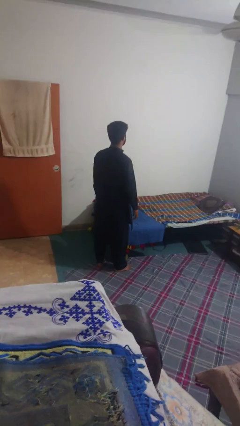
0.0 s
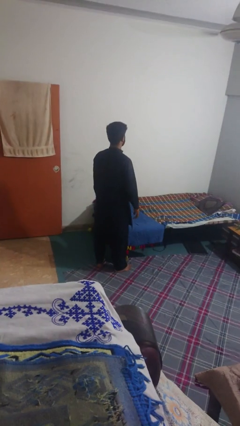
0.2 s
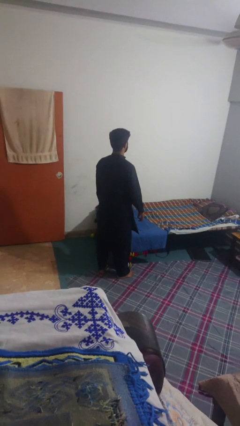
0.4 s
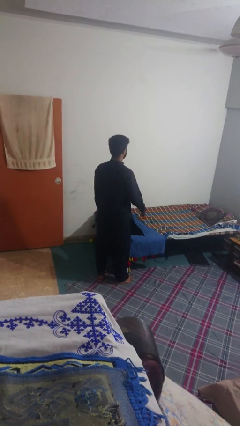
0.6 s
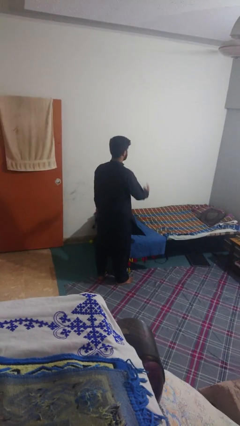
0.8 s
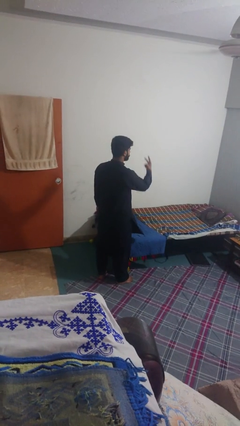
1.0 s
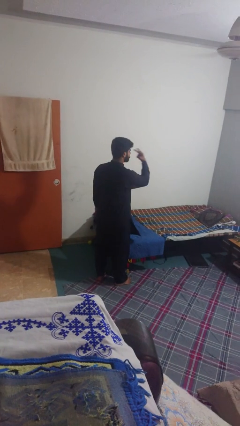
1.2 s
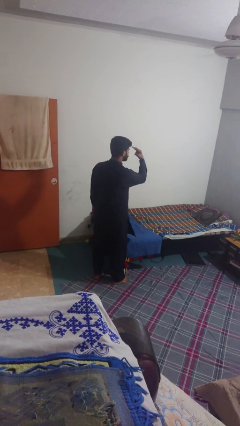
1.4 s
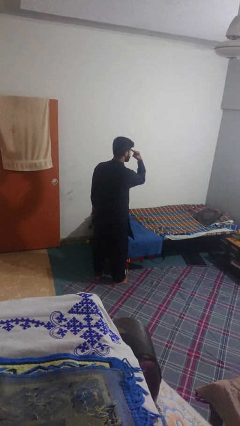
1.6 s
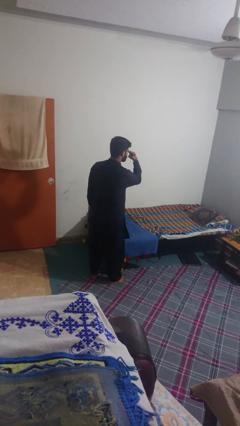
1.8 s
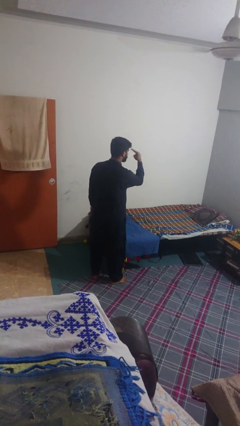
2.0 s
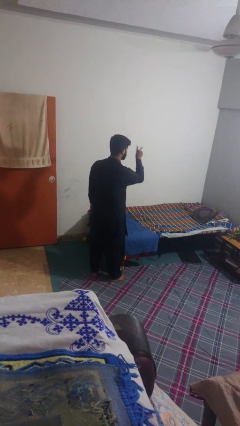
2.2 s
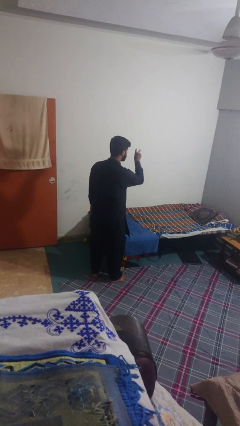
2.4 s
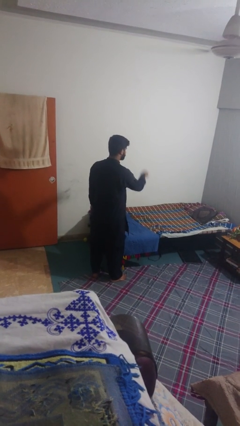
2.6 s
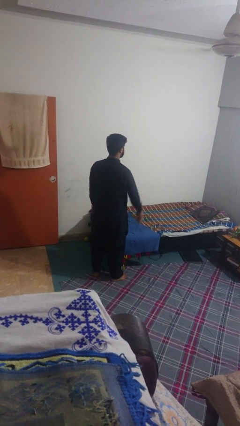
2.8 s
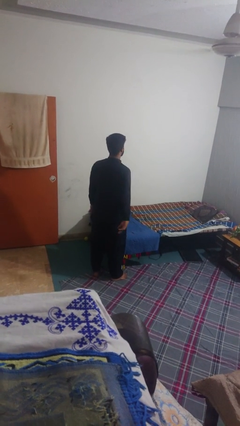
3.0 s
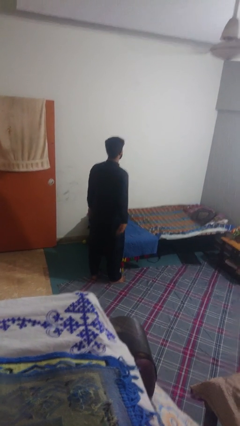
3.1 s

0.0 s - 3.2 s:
person gestures watch closely

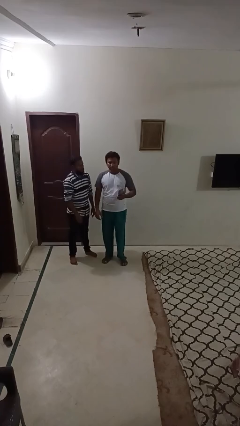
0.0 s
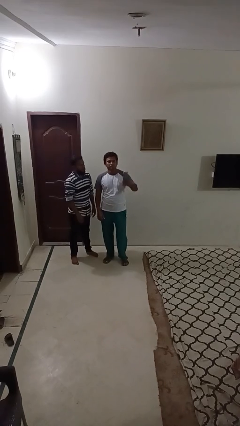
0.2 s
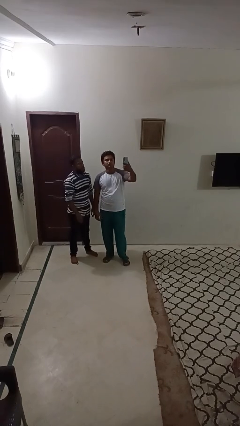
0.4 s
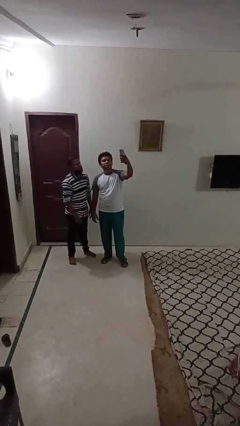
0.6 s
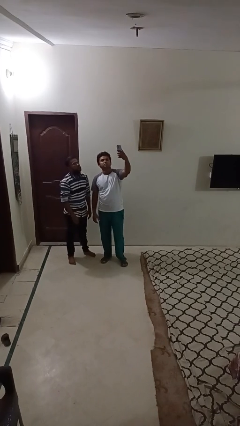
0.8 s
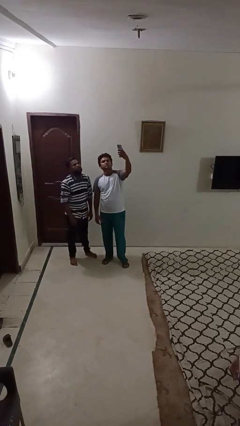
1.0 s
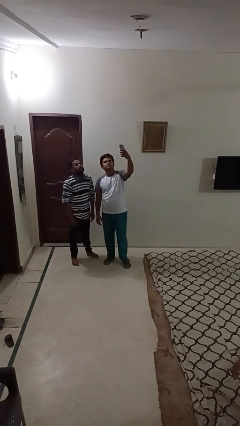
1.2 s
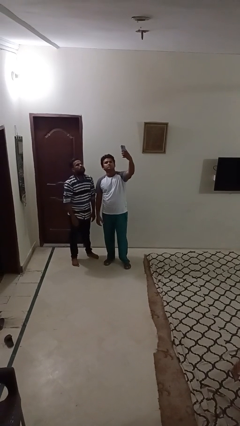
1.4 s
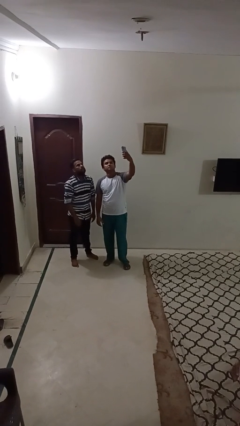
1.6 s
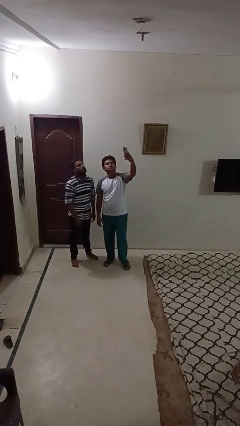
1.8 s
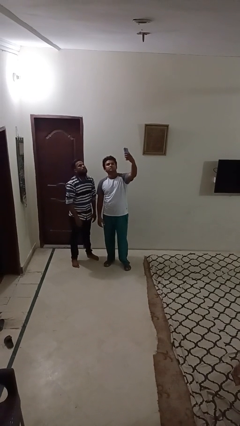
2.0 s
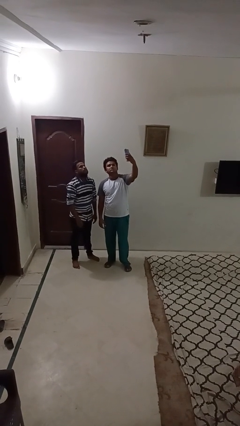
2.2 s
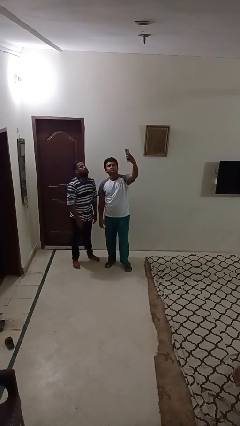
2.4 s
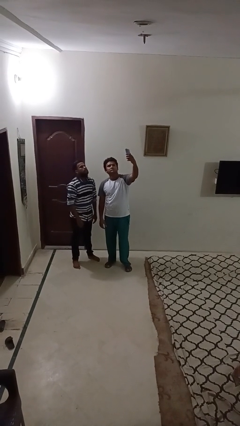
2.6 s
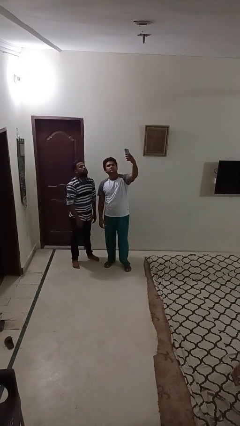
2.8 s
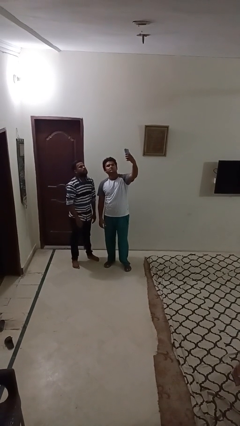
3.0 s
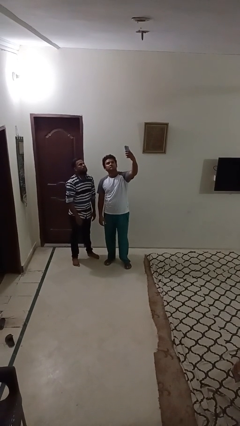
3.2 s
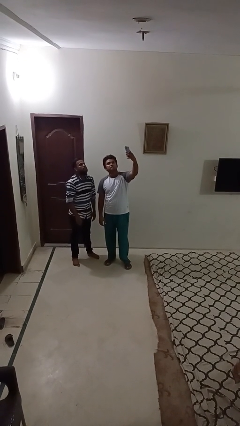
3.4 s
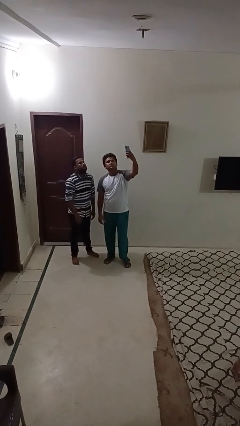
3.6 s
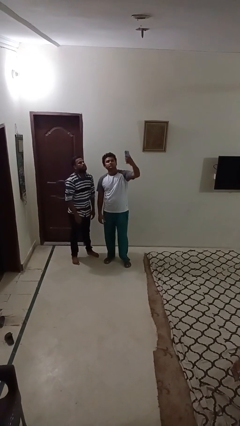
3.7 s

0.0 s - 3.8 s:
person takes selfie with person

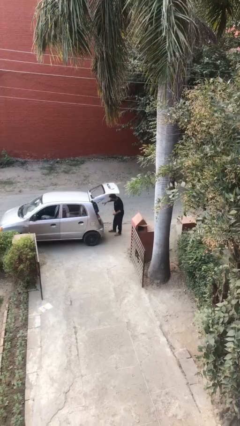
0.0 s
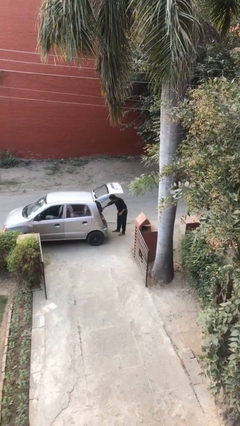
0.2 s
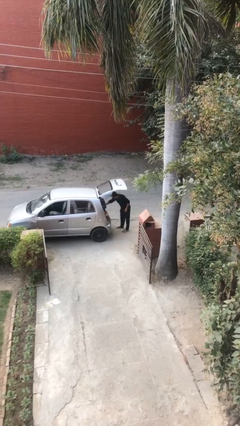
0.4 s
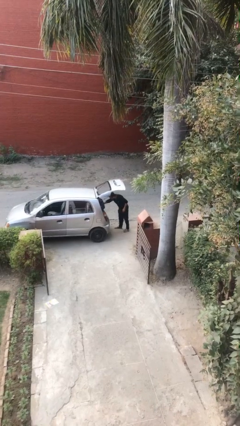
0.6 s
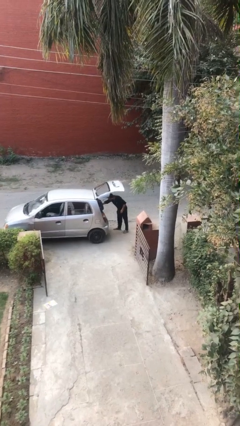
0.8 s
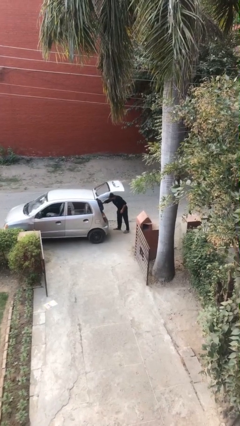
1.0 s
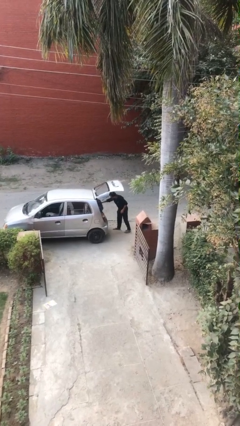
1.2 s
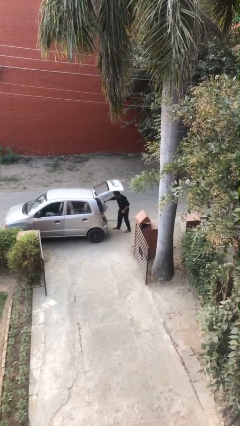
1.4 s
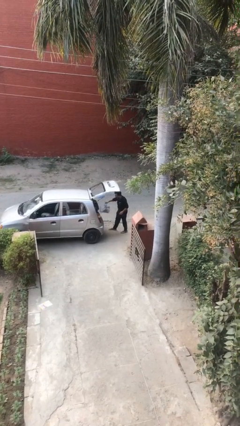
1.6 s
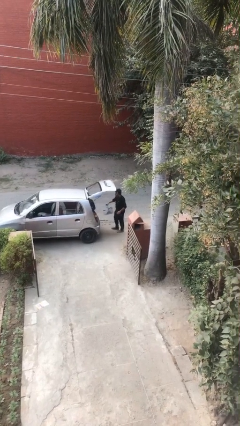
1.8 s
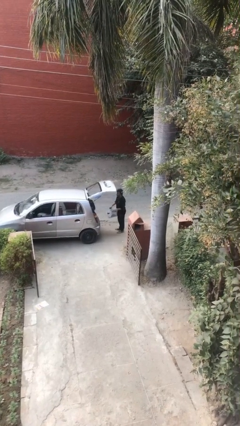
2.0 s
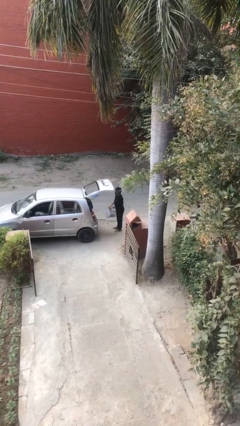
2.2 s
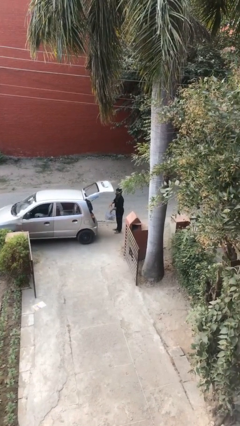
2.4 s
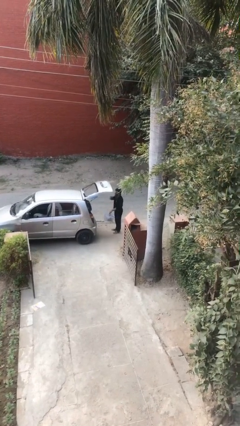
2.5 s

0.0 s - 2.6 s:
person unloads car

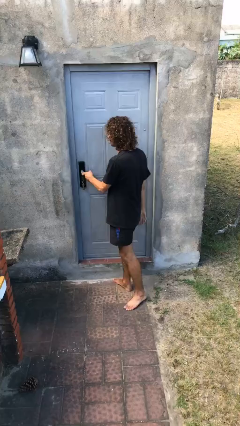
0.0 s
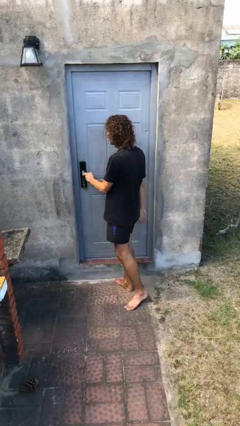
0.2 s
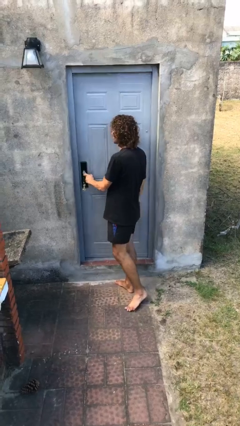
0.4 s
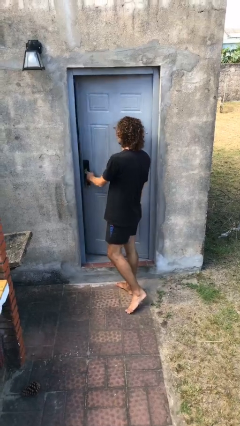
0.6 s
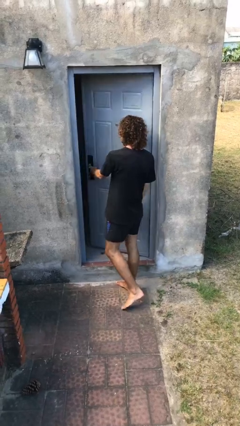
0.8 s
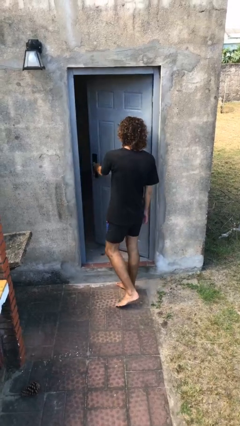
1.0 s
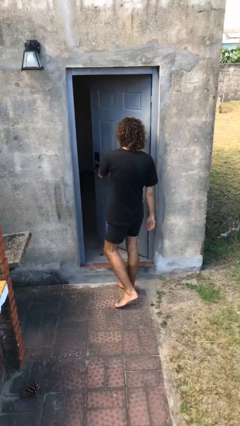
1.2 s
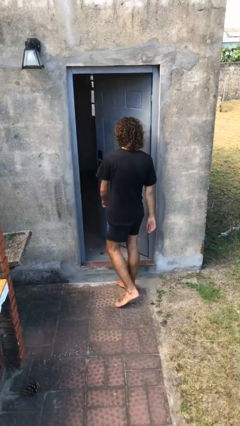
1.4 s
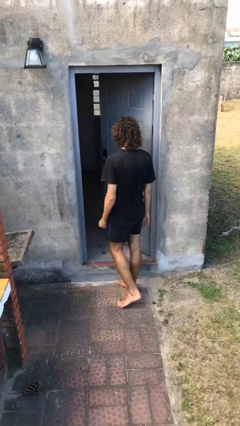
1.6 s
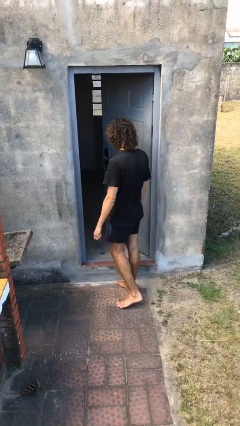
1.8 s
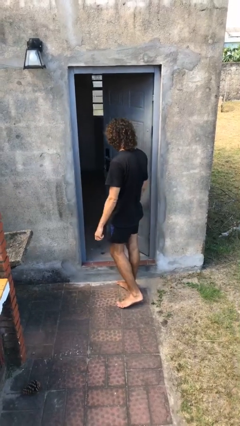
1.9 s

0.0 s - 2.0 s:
person opens facility door

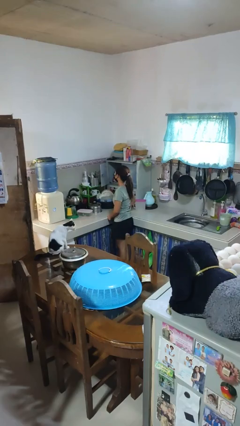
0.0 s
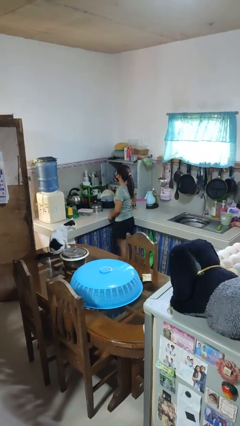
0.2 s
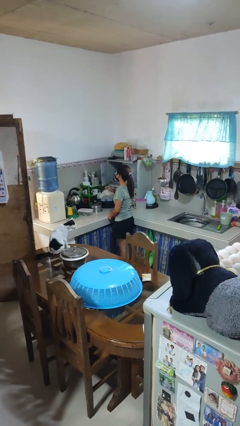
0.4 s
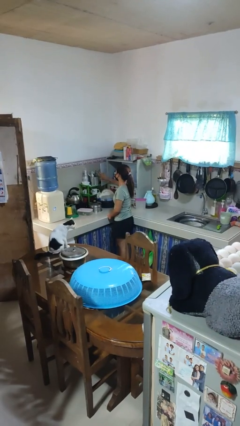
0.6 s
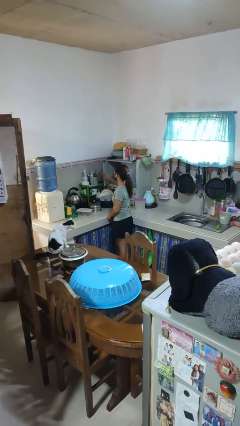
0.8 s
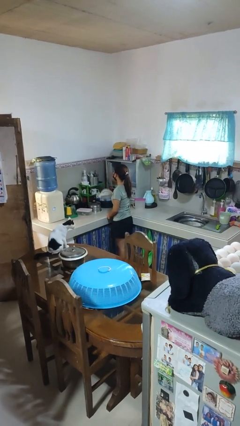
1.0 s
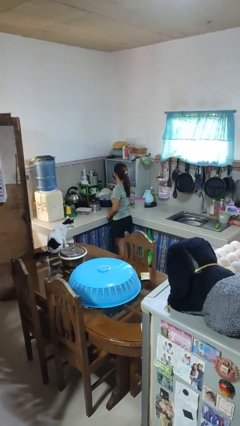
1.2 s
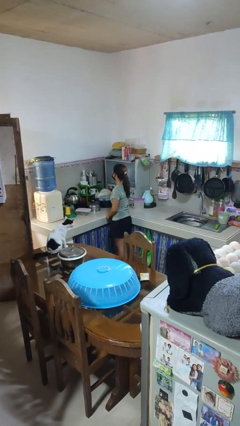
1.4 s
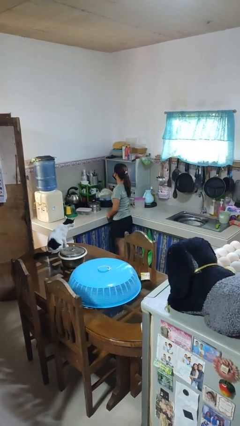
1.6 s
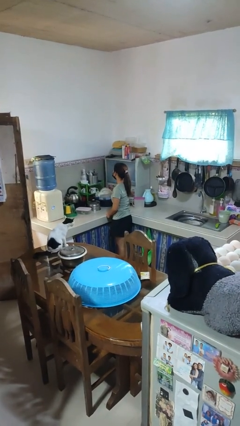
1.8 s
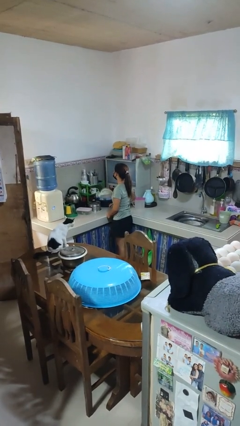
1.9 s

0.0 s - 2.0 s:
person closes kitchen drawer

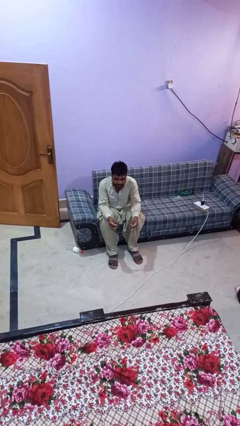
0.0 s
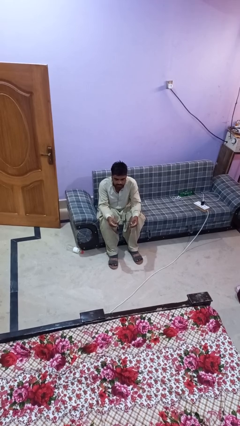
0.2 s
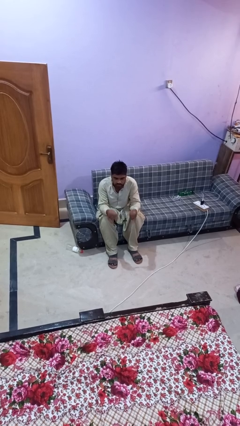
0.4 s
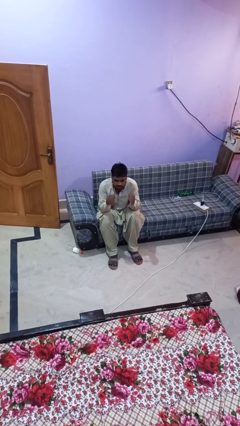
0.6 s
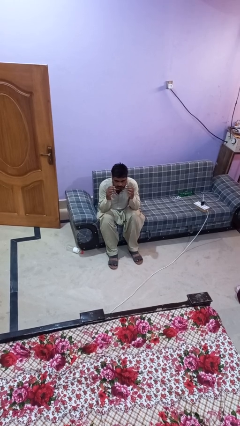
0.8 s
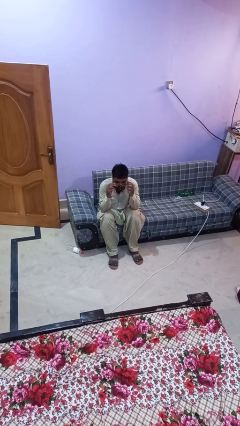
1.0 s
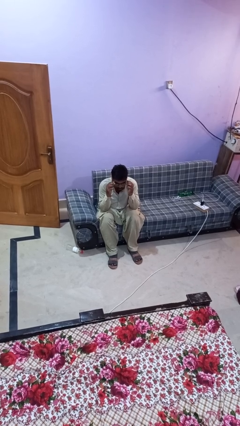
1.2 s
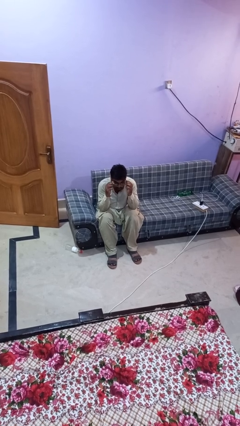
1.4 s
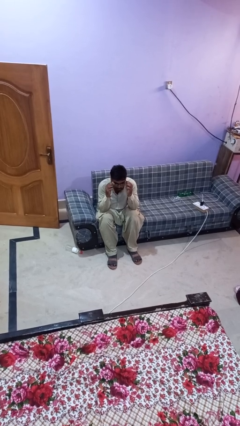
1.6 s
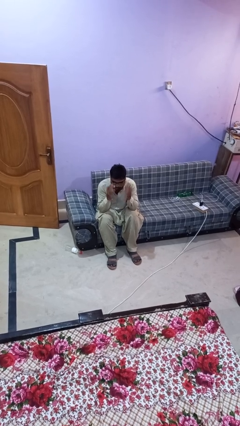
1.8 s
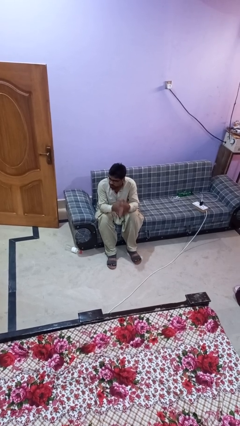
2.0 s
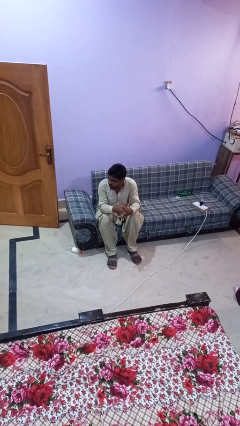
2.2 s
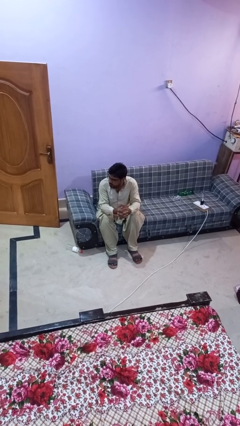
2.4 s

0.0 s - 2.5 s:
person puts on glasses

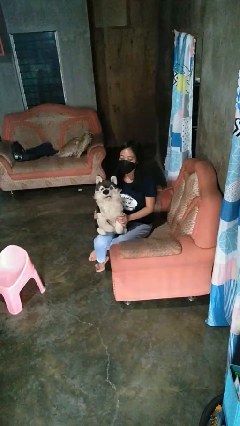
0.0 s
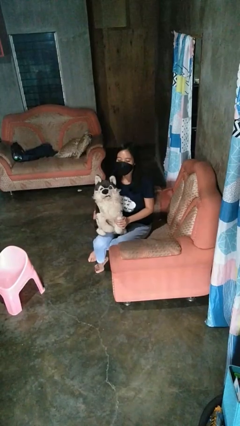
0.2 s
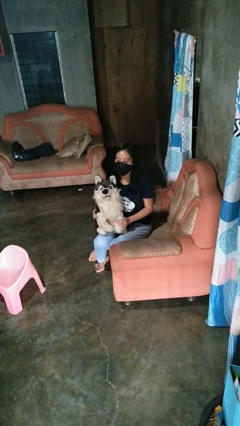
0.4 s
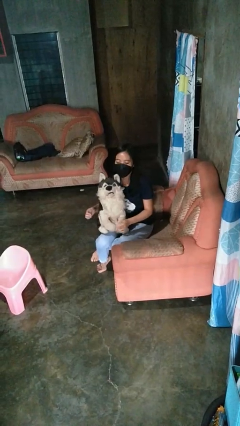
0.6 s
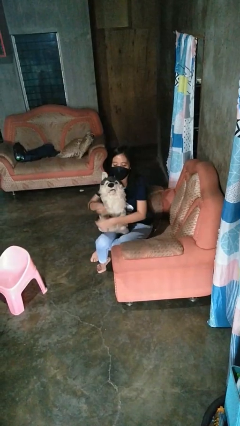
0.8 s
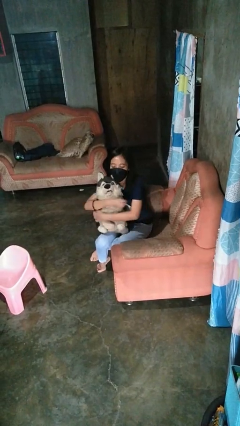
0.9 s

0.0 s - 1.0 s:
person hugs stuffed animal
